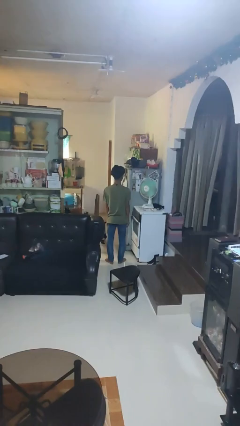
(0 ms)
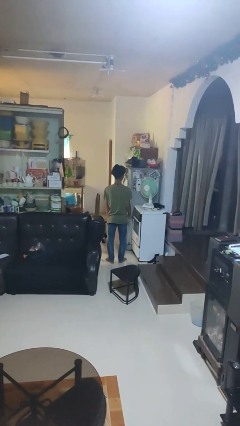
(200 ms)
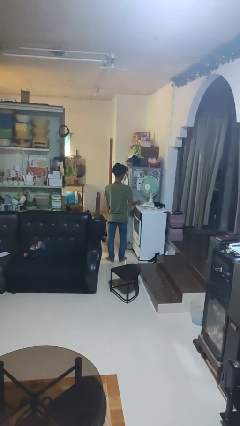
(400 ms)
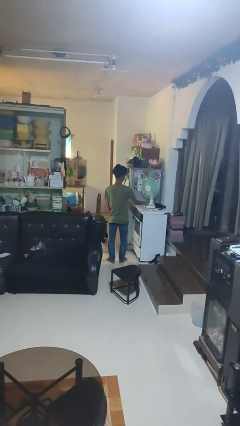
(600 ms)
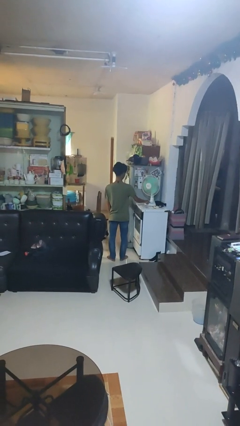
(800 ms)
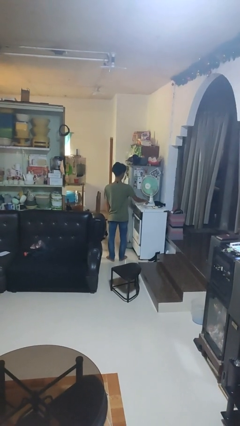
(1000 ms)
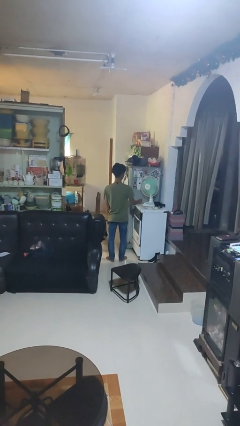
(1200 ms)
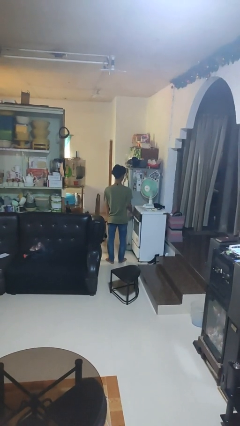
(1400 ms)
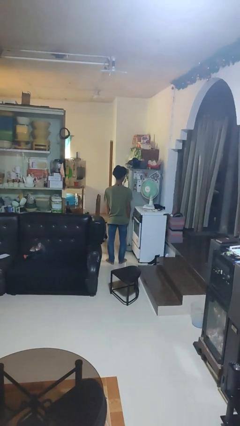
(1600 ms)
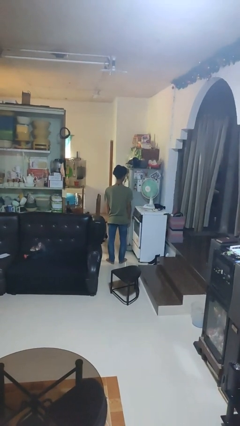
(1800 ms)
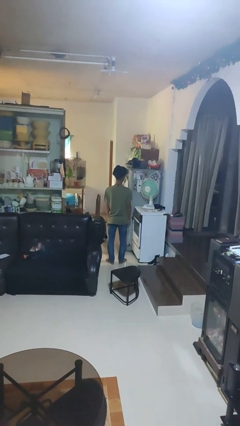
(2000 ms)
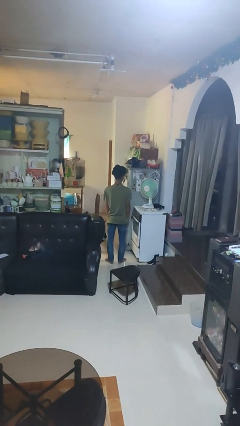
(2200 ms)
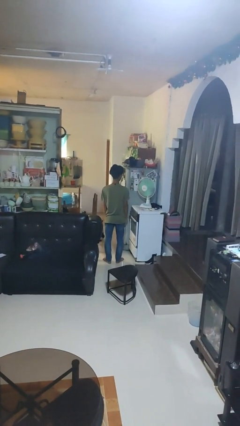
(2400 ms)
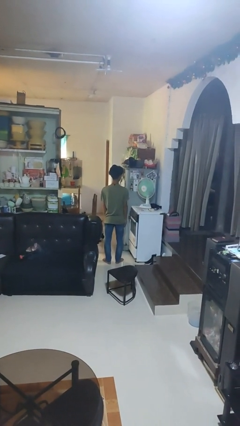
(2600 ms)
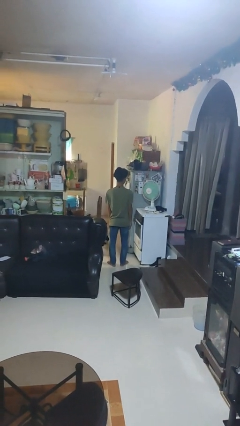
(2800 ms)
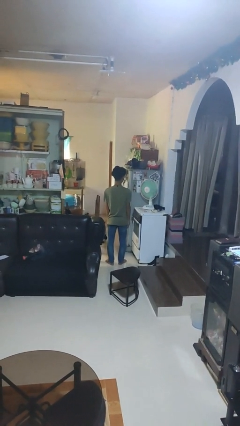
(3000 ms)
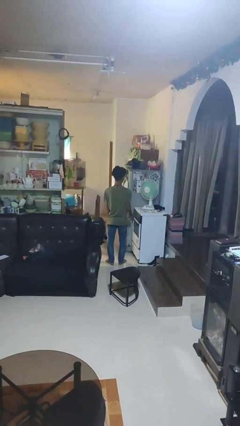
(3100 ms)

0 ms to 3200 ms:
person turns on fan

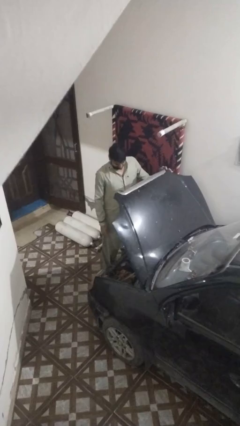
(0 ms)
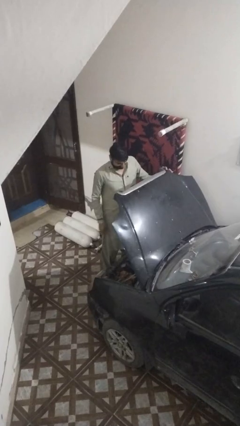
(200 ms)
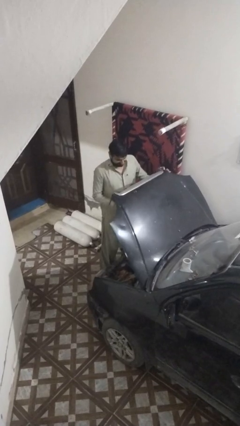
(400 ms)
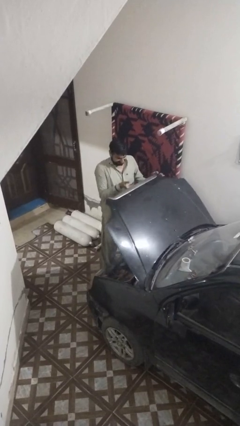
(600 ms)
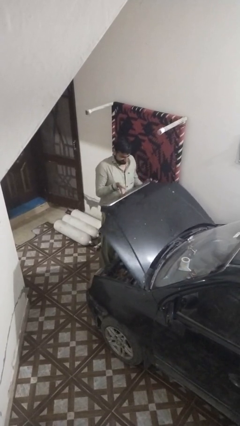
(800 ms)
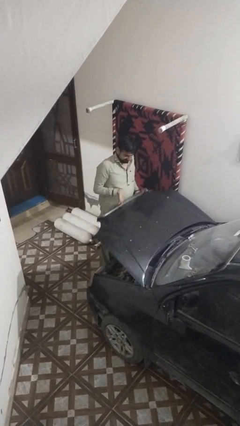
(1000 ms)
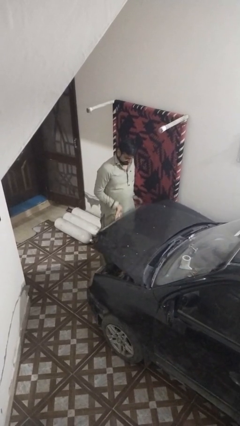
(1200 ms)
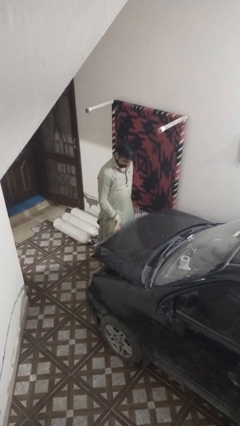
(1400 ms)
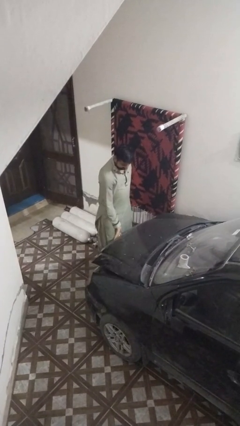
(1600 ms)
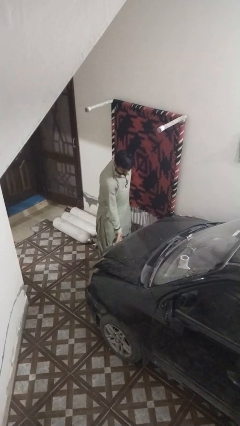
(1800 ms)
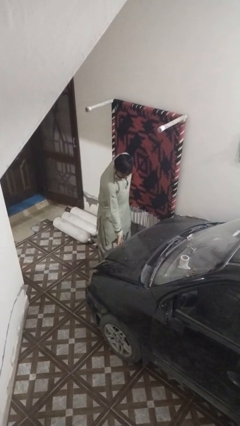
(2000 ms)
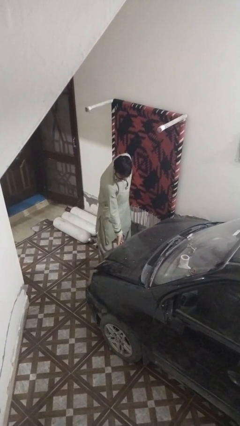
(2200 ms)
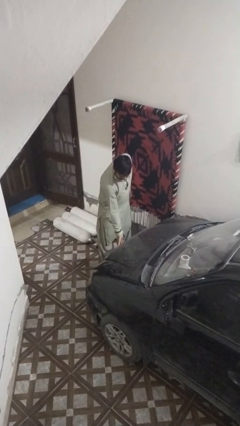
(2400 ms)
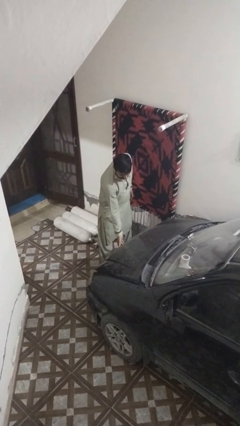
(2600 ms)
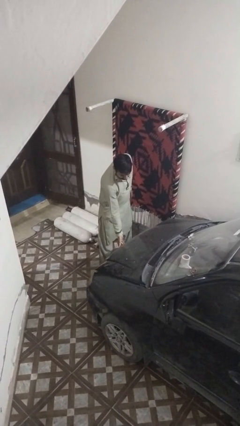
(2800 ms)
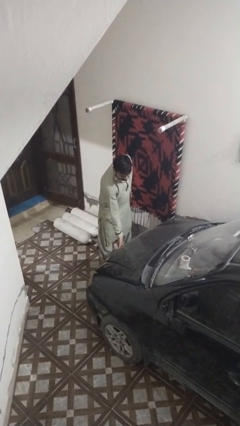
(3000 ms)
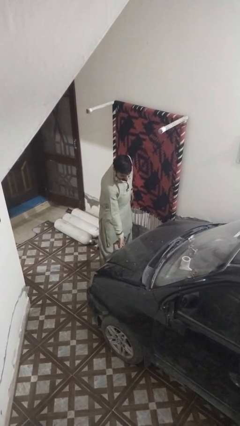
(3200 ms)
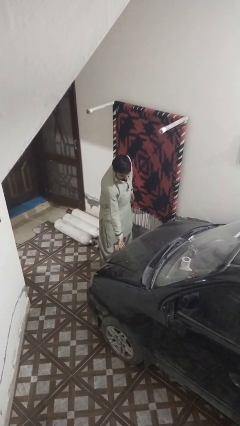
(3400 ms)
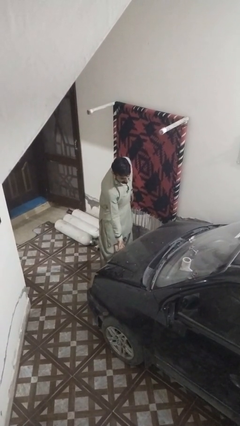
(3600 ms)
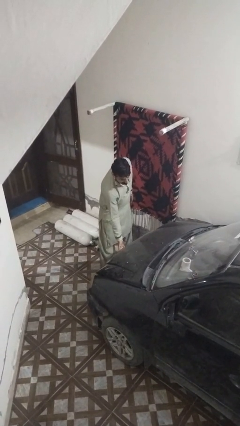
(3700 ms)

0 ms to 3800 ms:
person closes car hood

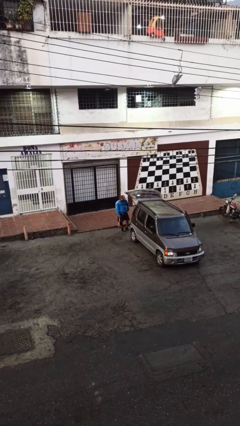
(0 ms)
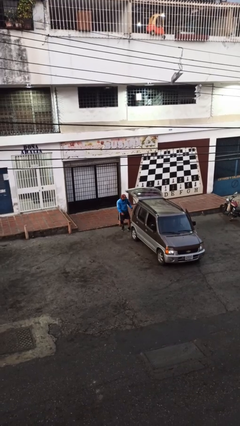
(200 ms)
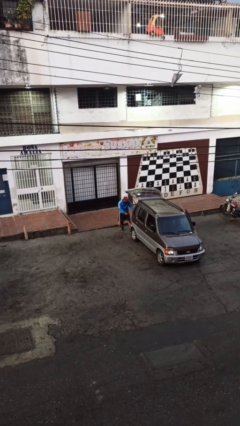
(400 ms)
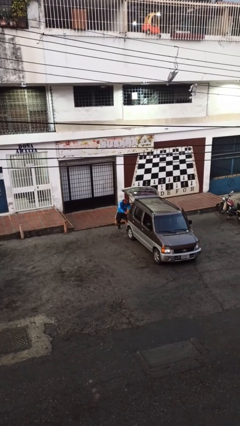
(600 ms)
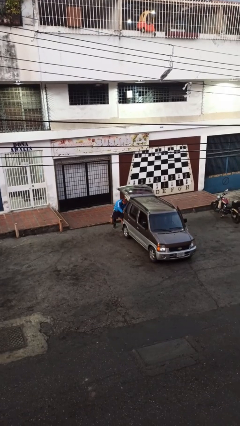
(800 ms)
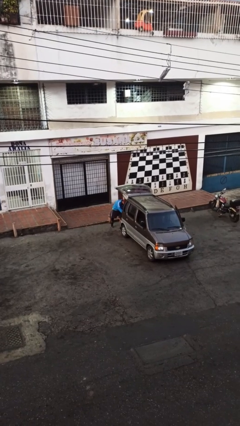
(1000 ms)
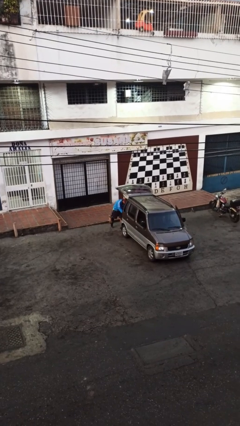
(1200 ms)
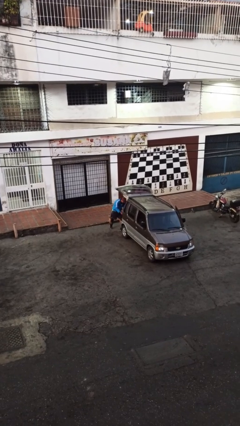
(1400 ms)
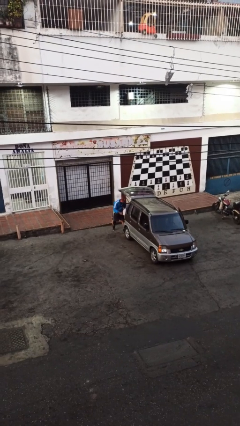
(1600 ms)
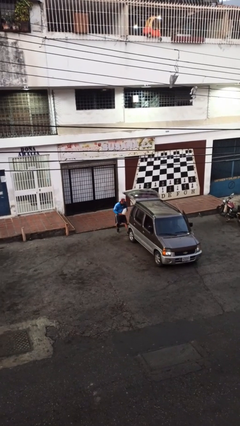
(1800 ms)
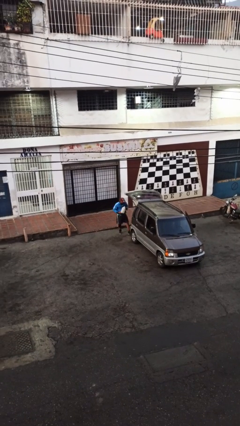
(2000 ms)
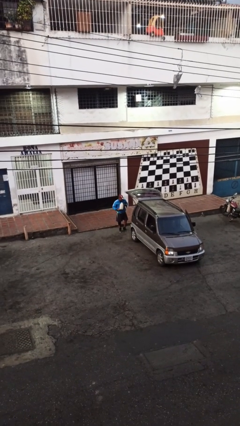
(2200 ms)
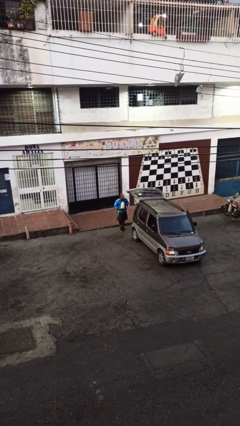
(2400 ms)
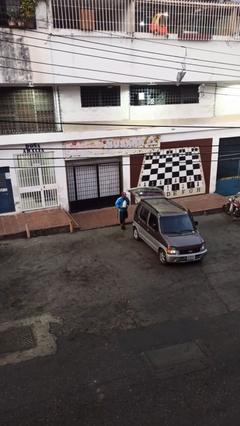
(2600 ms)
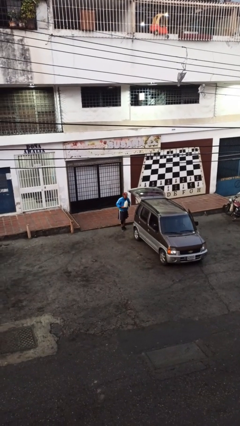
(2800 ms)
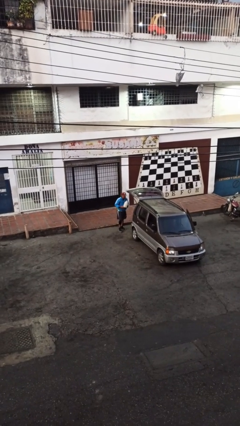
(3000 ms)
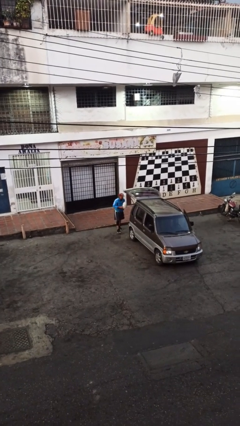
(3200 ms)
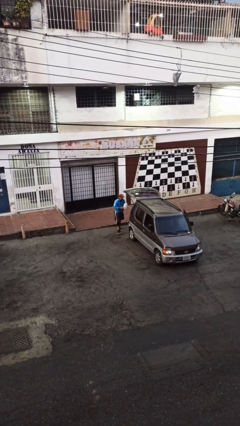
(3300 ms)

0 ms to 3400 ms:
person unloads car

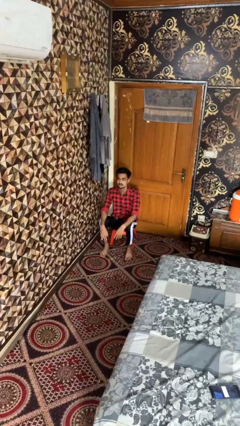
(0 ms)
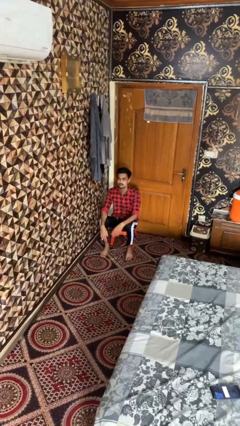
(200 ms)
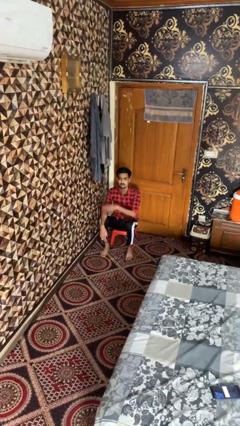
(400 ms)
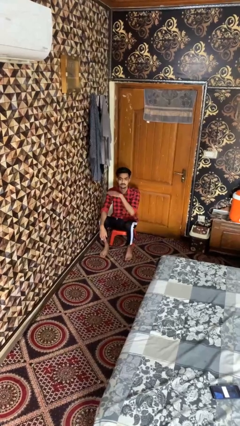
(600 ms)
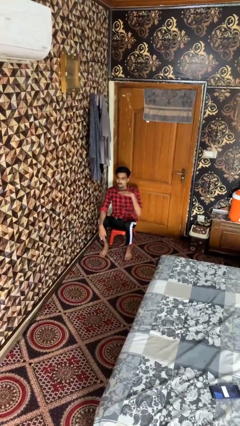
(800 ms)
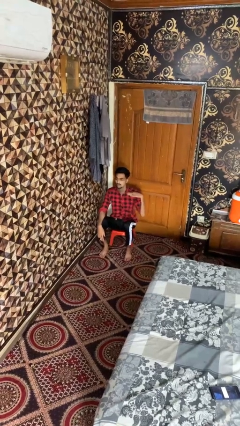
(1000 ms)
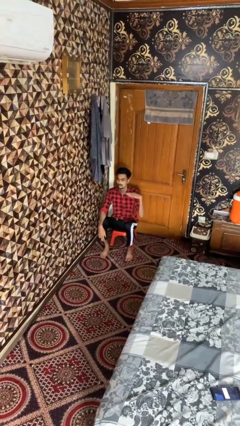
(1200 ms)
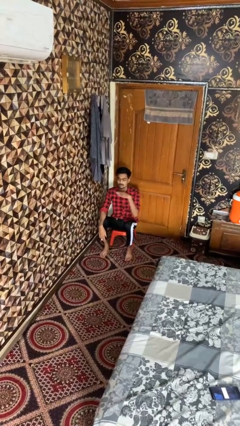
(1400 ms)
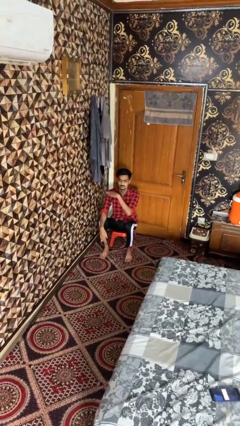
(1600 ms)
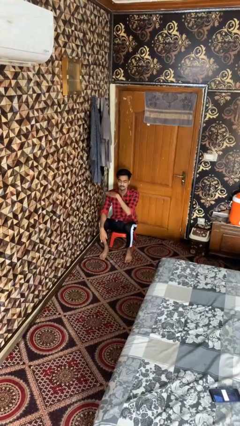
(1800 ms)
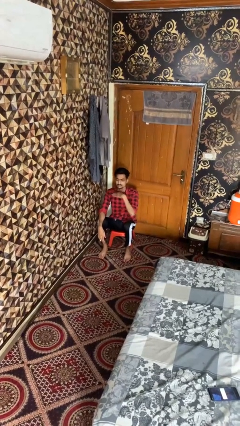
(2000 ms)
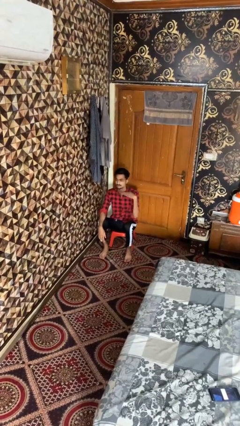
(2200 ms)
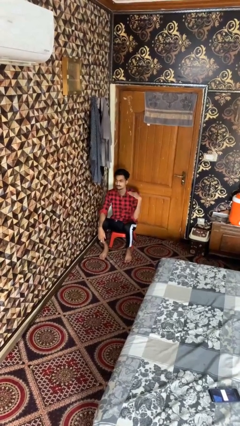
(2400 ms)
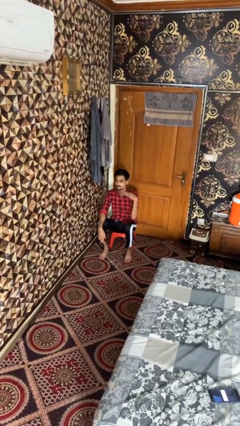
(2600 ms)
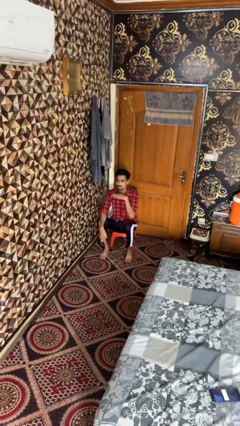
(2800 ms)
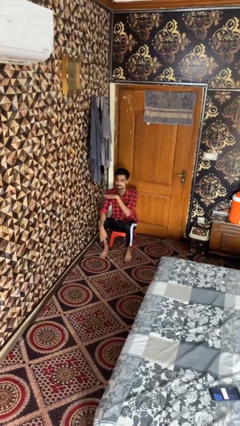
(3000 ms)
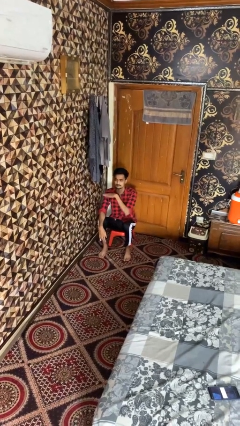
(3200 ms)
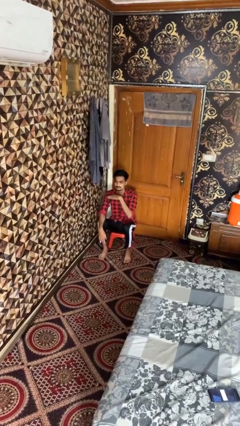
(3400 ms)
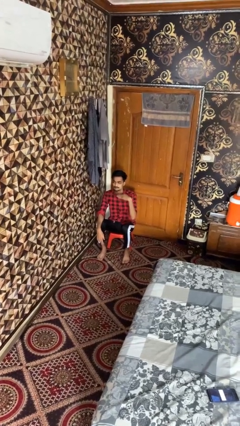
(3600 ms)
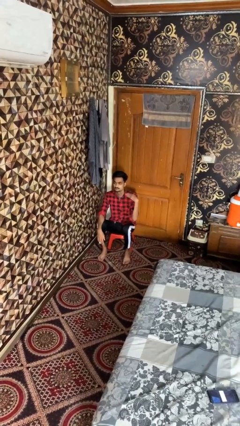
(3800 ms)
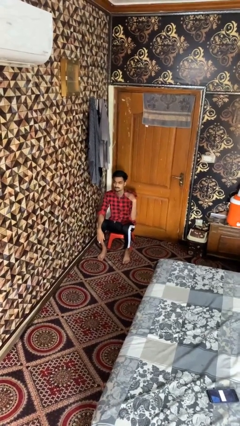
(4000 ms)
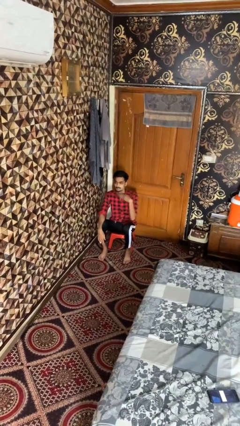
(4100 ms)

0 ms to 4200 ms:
person gestures cut

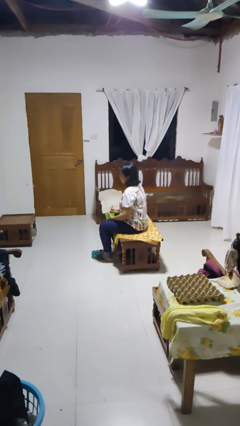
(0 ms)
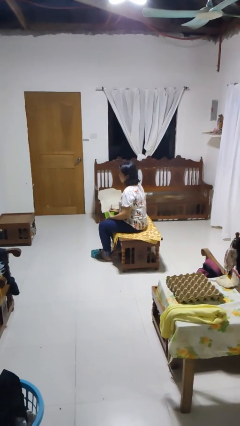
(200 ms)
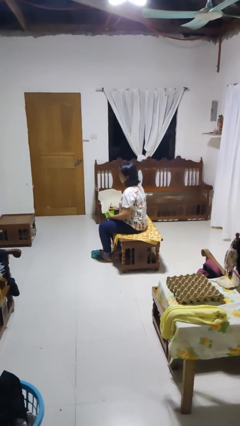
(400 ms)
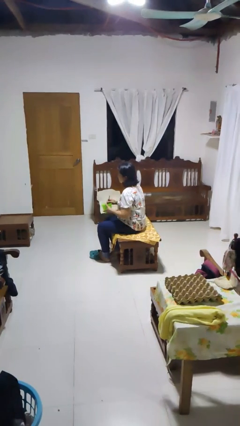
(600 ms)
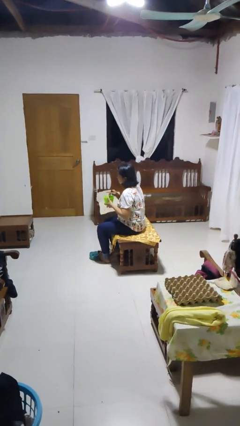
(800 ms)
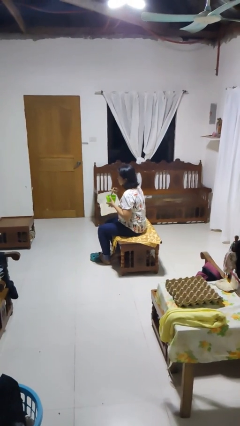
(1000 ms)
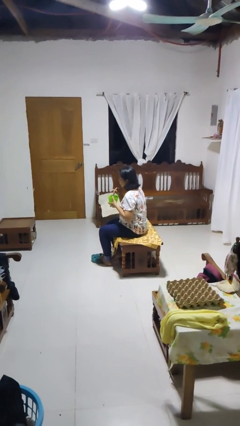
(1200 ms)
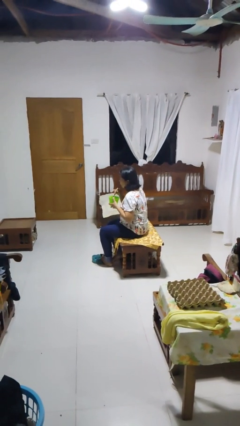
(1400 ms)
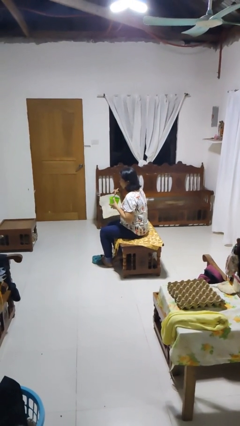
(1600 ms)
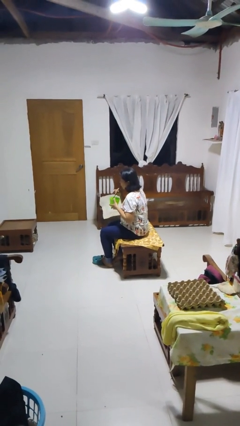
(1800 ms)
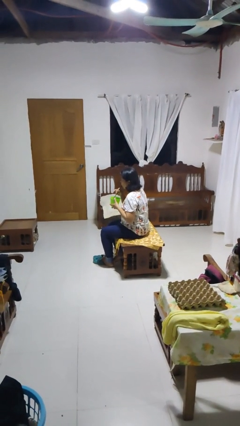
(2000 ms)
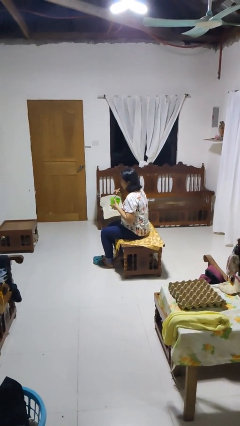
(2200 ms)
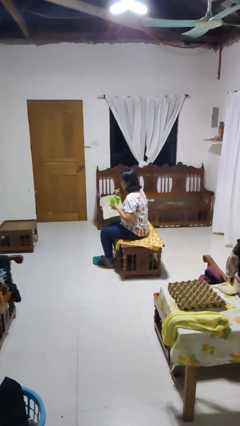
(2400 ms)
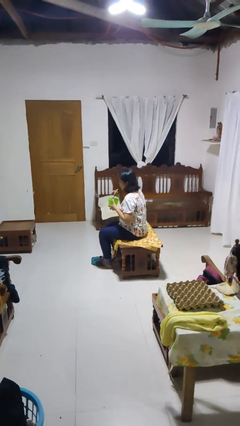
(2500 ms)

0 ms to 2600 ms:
person drinks from straw

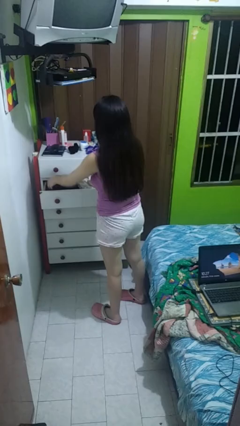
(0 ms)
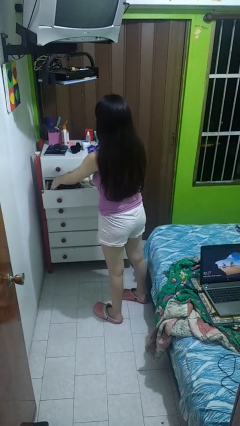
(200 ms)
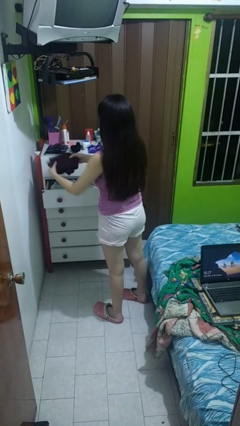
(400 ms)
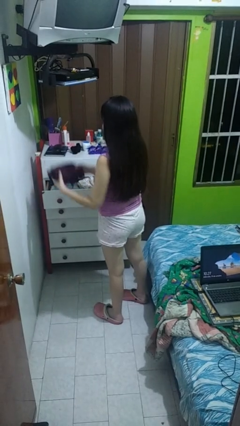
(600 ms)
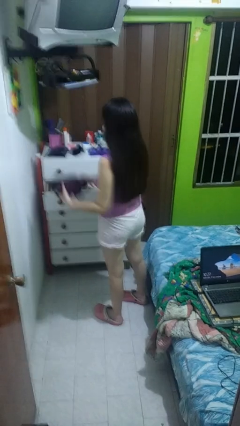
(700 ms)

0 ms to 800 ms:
person takes clothes from dresser
